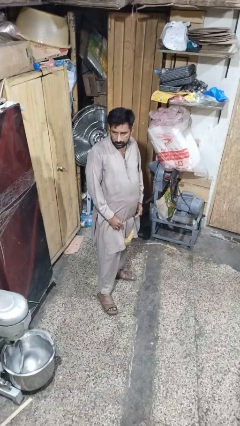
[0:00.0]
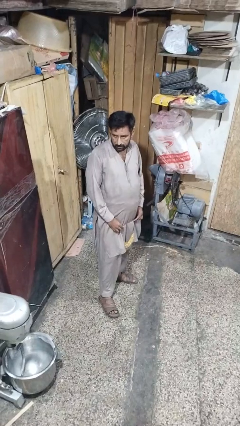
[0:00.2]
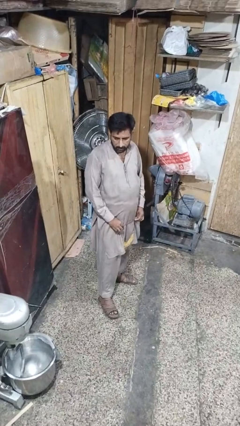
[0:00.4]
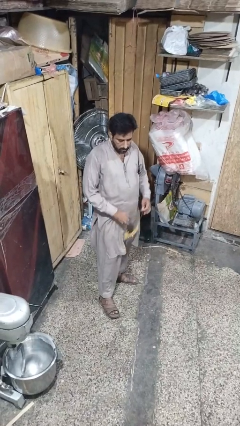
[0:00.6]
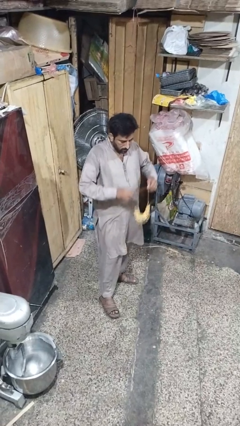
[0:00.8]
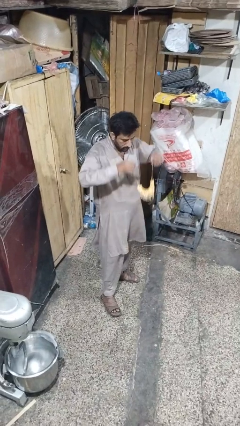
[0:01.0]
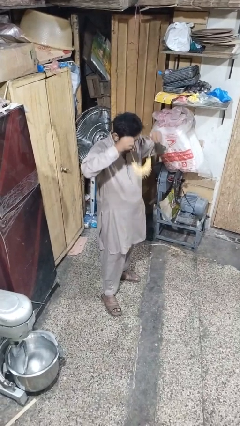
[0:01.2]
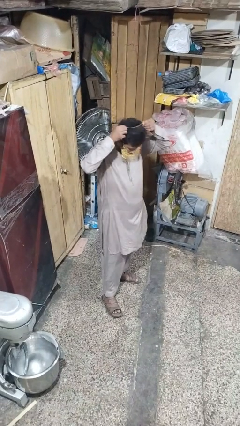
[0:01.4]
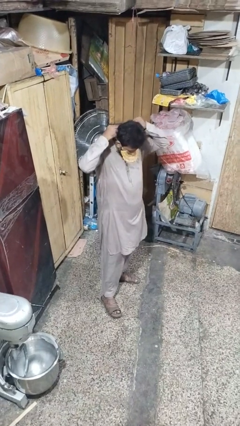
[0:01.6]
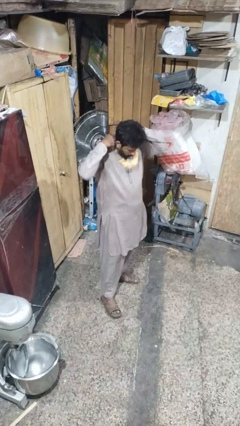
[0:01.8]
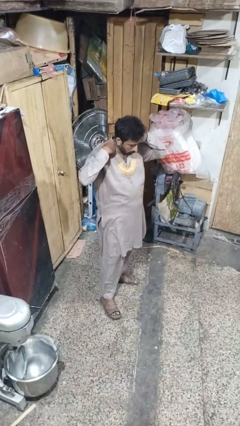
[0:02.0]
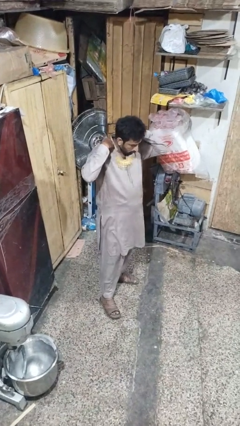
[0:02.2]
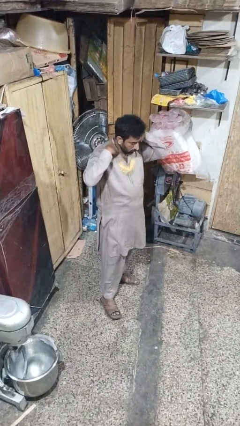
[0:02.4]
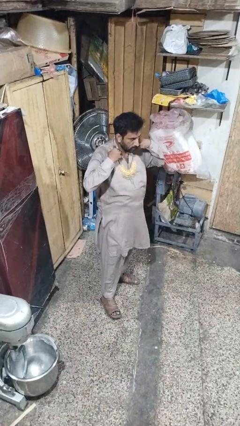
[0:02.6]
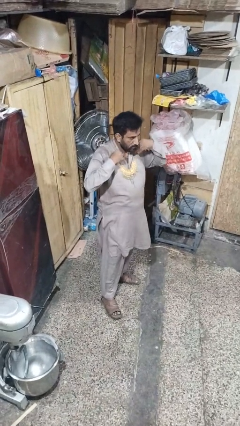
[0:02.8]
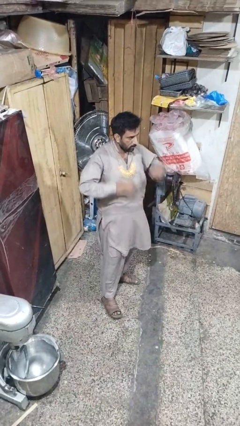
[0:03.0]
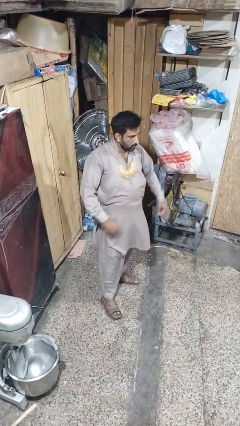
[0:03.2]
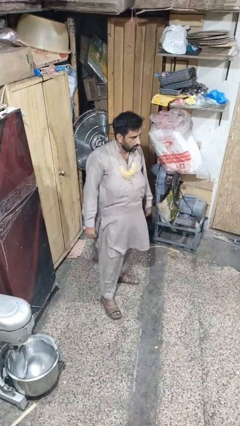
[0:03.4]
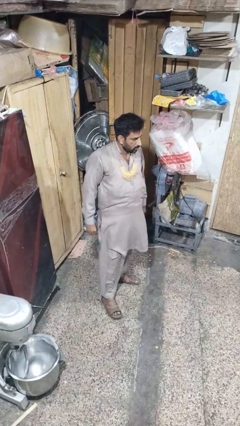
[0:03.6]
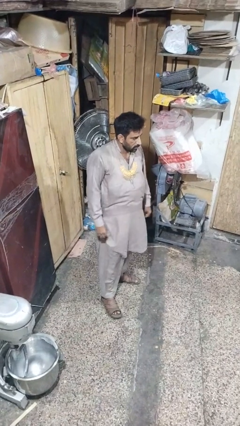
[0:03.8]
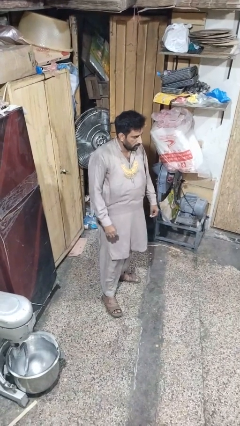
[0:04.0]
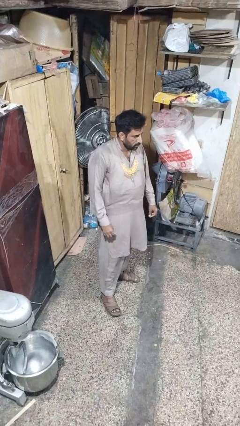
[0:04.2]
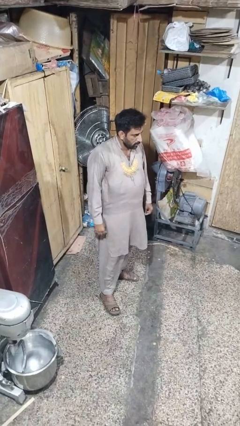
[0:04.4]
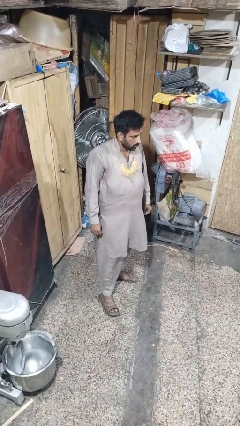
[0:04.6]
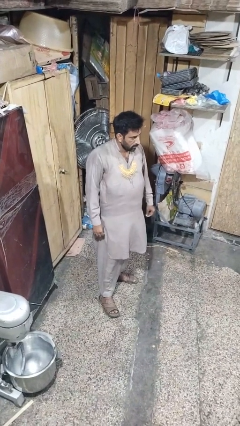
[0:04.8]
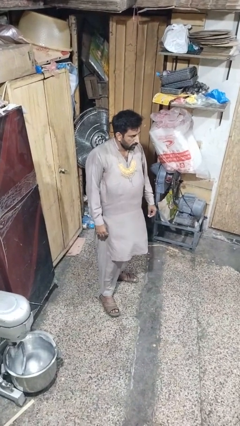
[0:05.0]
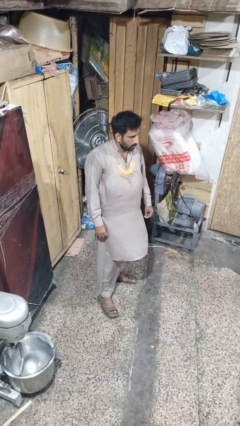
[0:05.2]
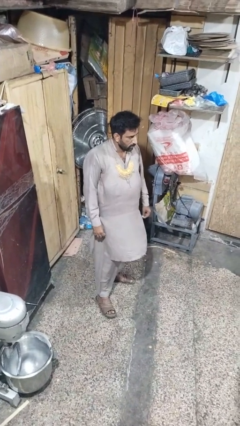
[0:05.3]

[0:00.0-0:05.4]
person puts on necklace

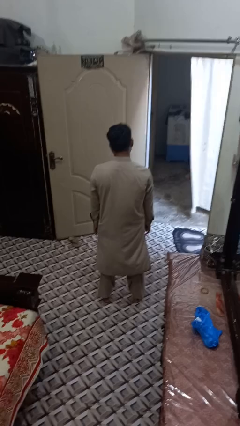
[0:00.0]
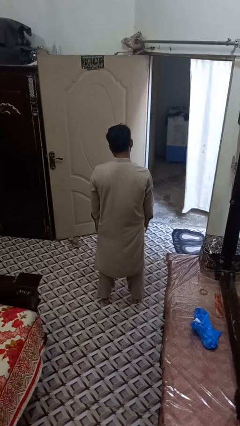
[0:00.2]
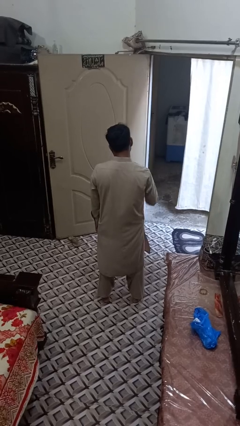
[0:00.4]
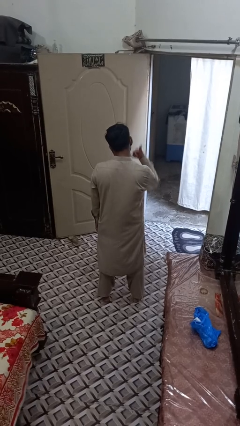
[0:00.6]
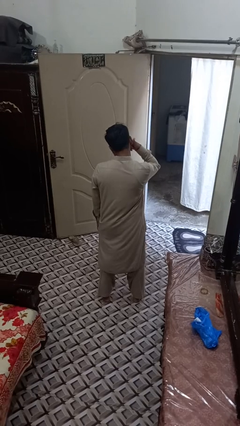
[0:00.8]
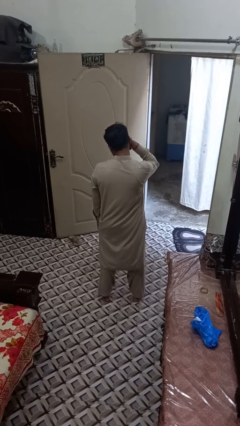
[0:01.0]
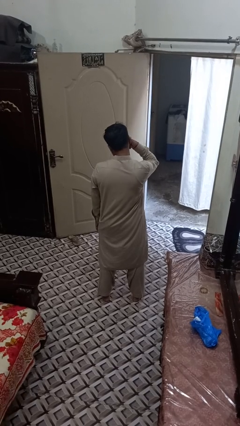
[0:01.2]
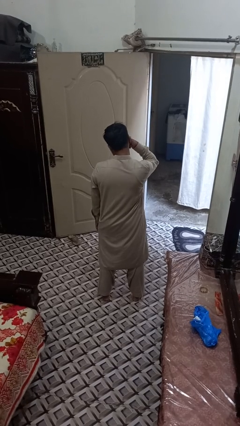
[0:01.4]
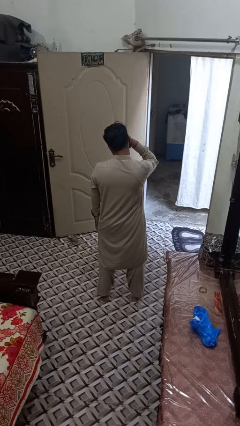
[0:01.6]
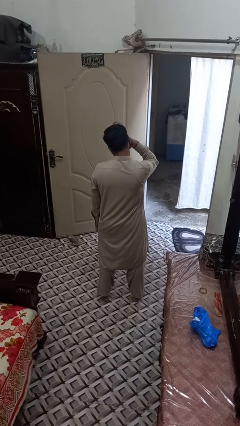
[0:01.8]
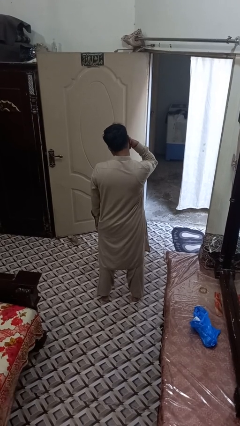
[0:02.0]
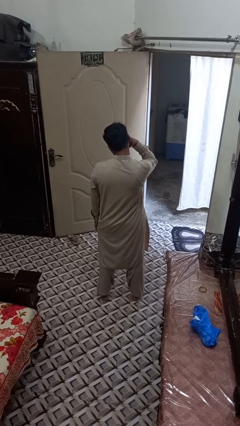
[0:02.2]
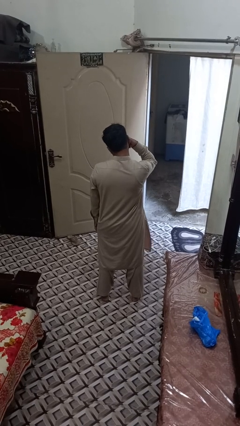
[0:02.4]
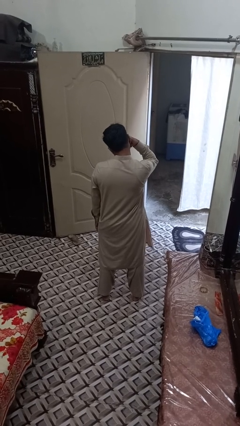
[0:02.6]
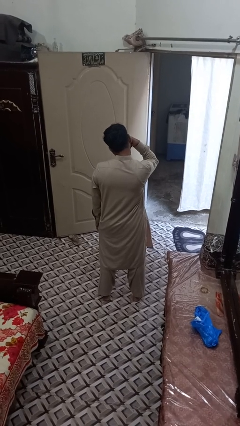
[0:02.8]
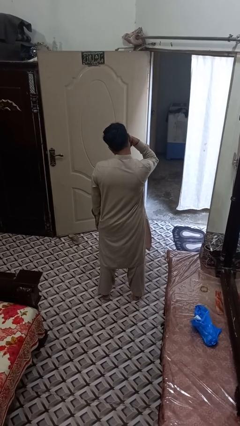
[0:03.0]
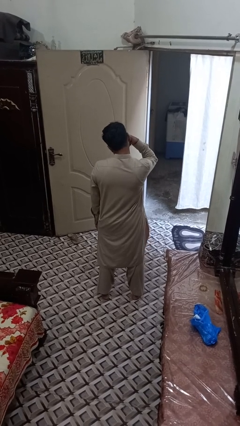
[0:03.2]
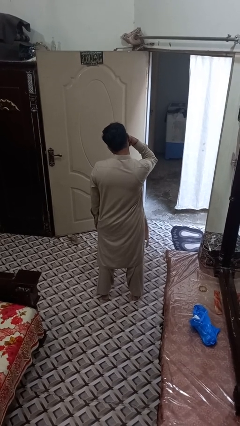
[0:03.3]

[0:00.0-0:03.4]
person gestures call me

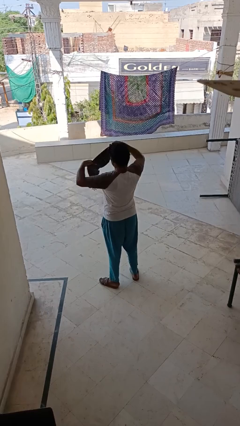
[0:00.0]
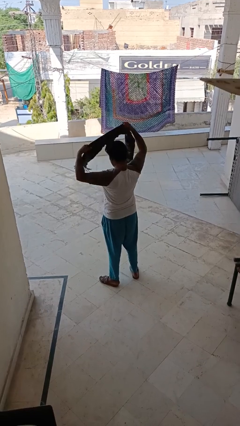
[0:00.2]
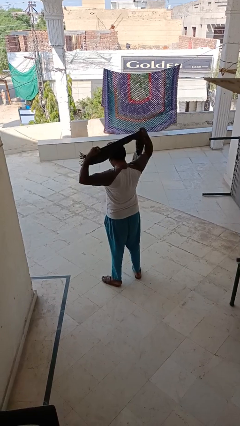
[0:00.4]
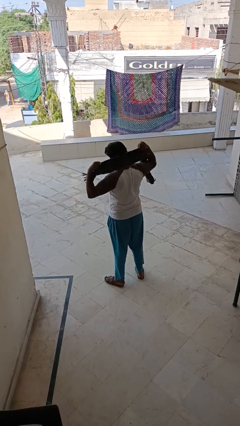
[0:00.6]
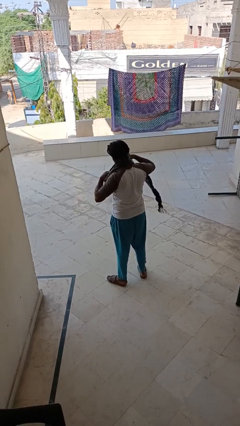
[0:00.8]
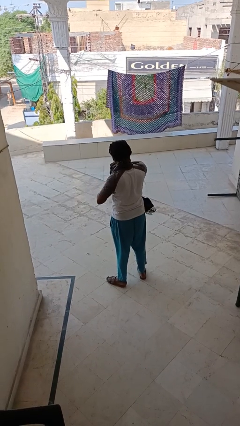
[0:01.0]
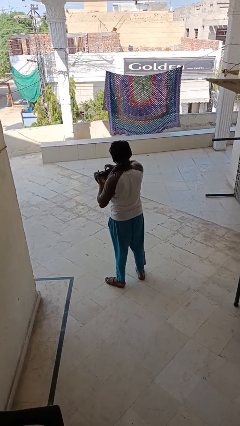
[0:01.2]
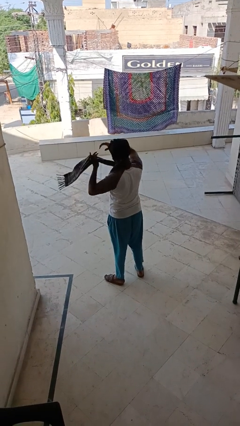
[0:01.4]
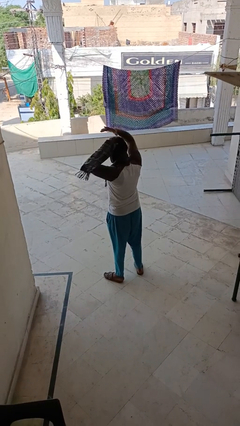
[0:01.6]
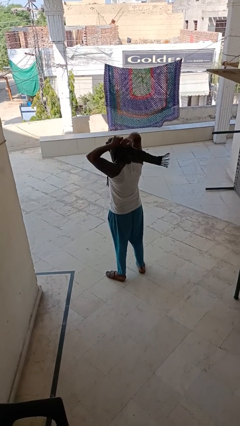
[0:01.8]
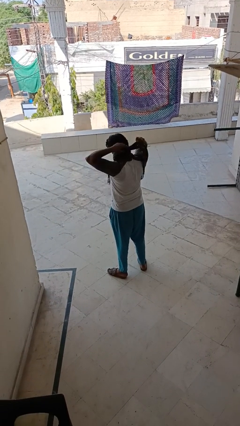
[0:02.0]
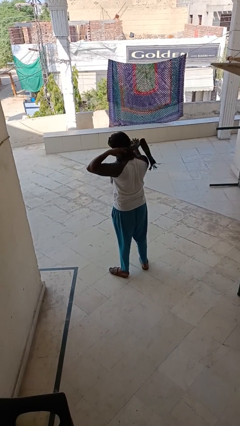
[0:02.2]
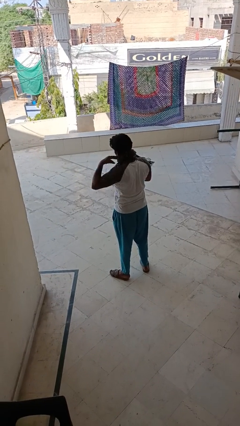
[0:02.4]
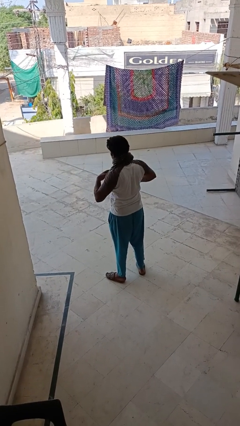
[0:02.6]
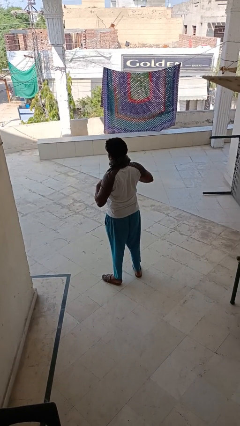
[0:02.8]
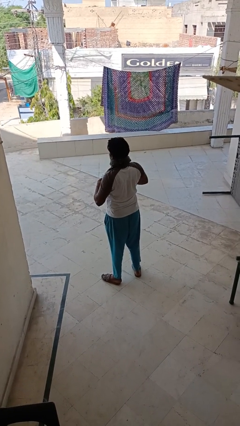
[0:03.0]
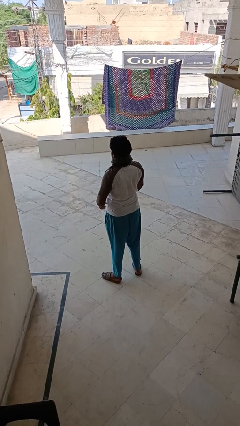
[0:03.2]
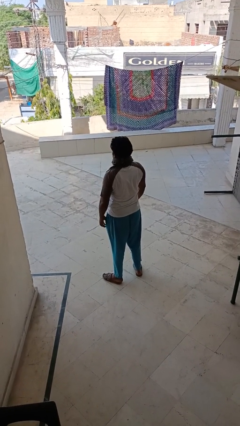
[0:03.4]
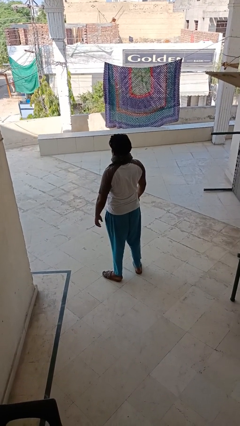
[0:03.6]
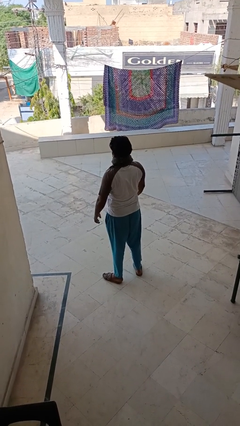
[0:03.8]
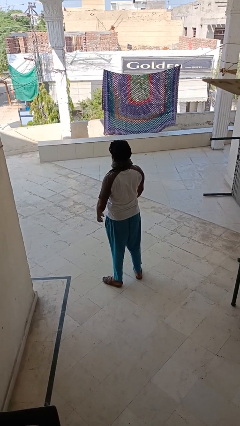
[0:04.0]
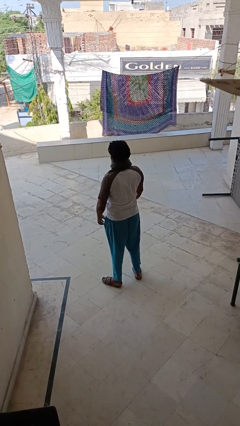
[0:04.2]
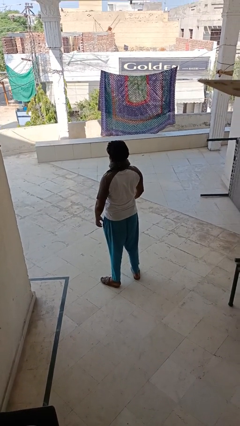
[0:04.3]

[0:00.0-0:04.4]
person puts on scarf

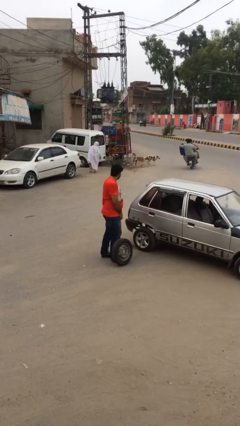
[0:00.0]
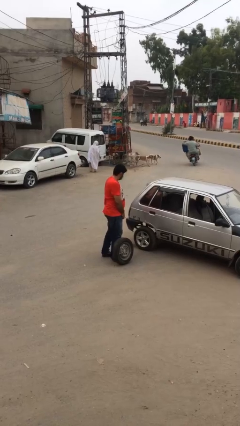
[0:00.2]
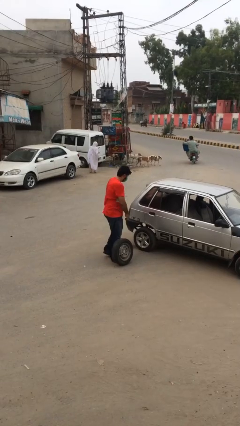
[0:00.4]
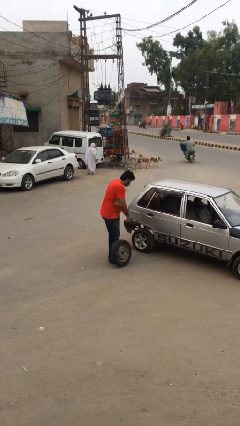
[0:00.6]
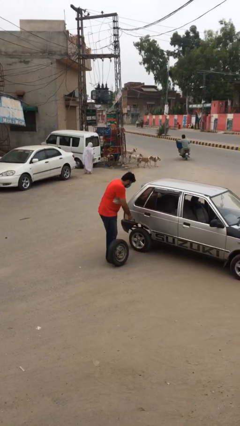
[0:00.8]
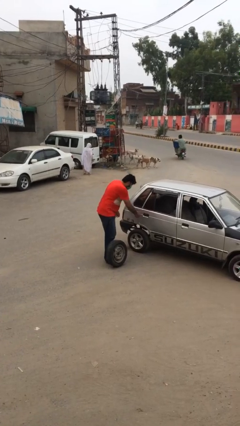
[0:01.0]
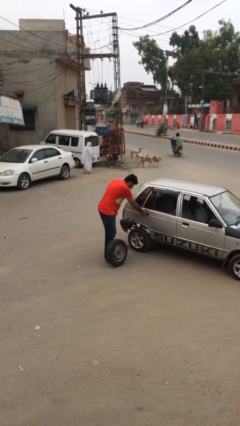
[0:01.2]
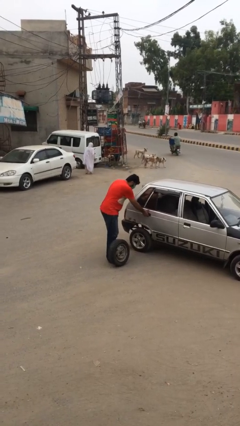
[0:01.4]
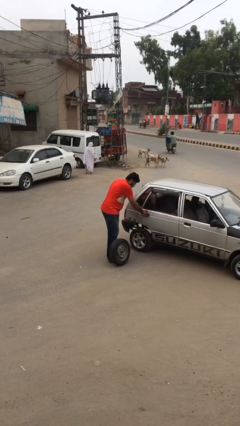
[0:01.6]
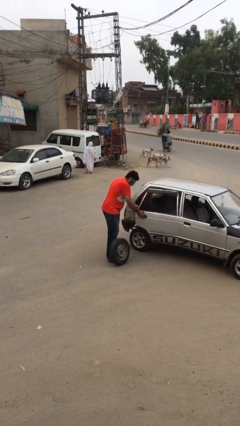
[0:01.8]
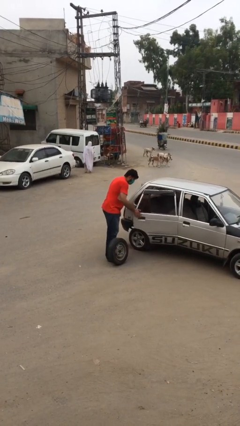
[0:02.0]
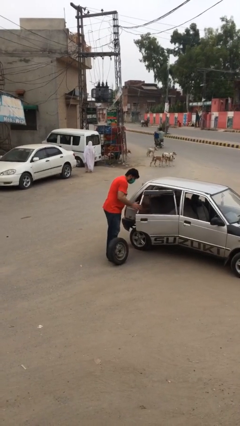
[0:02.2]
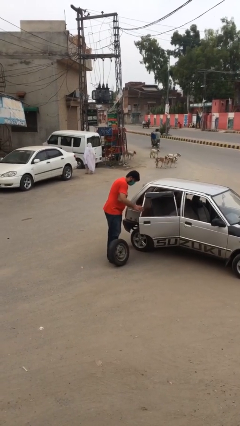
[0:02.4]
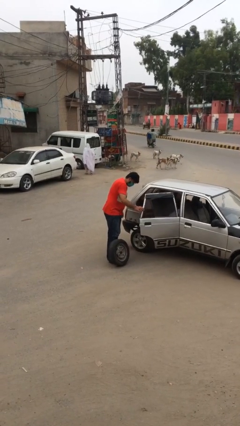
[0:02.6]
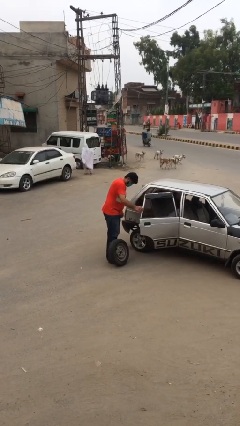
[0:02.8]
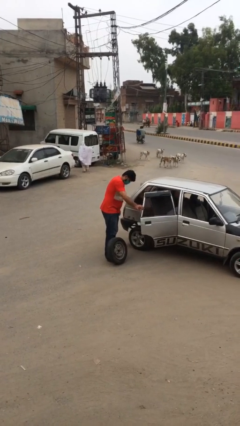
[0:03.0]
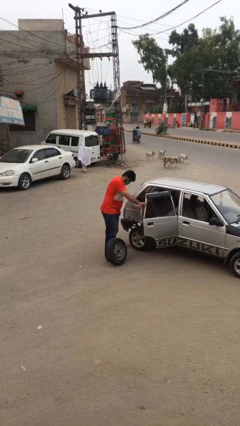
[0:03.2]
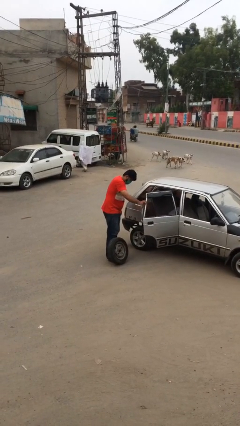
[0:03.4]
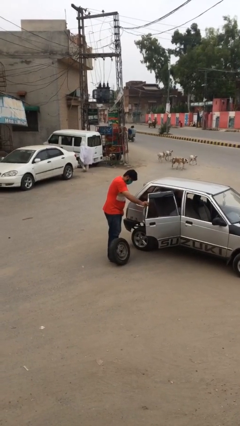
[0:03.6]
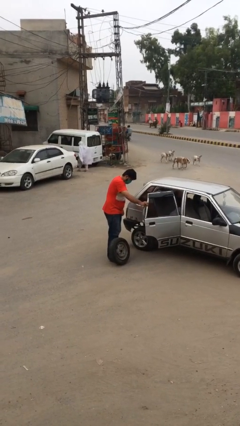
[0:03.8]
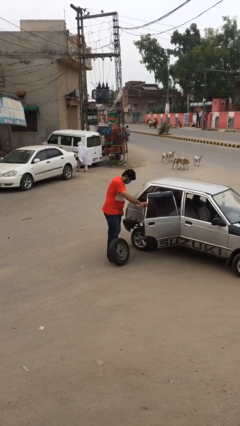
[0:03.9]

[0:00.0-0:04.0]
person opens car door

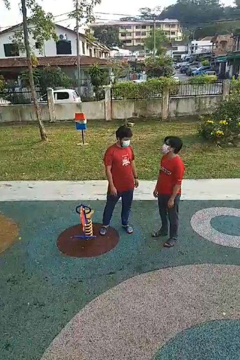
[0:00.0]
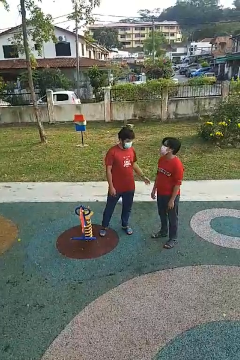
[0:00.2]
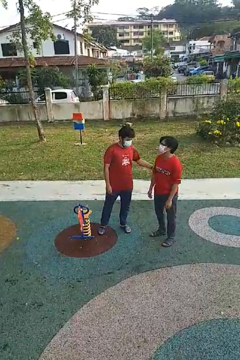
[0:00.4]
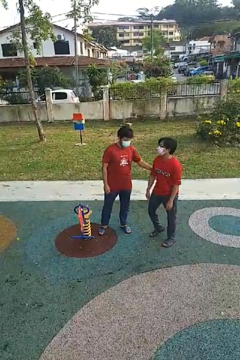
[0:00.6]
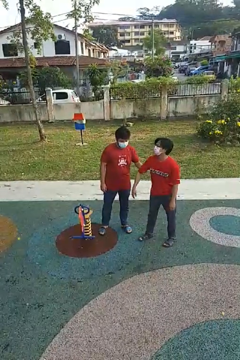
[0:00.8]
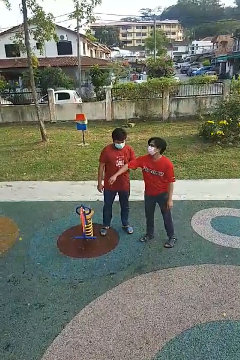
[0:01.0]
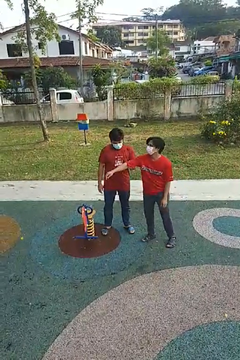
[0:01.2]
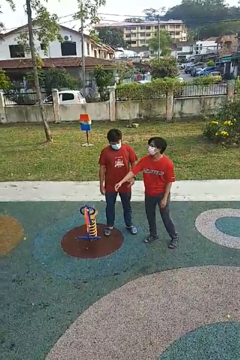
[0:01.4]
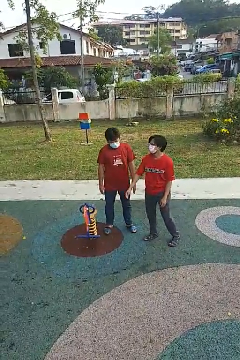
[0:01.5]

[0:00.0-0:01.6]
person grabs person by bicep
